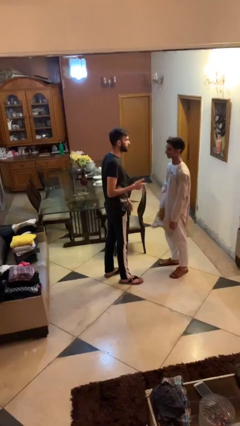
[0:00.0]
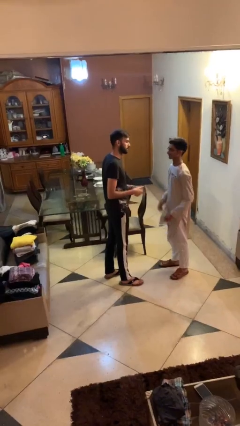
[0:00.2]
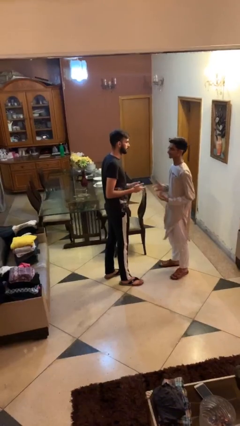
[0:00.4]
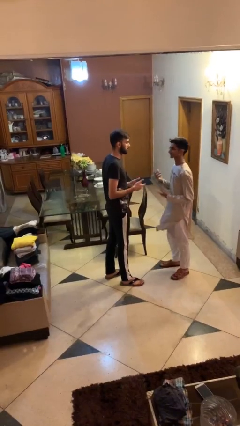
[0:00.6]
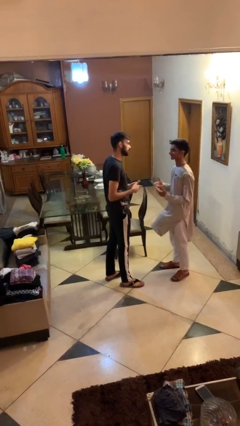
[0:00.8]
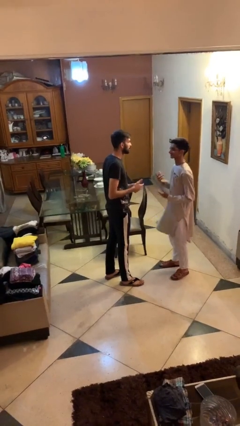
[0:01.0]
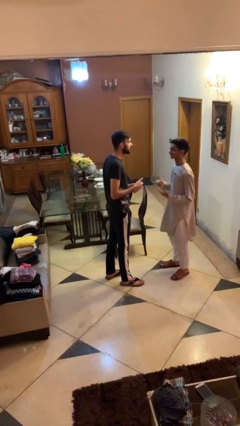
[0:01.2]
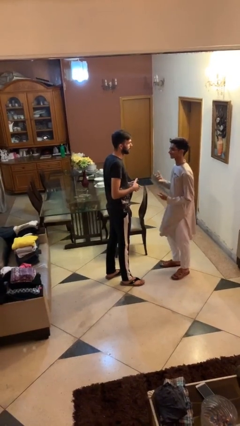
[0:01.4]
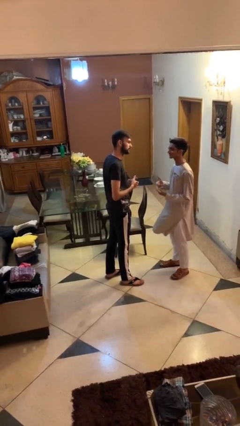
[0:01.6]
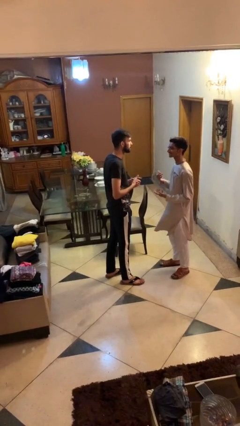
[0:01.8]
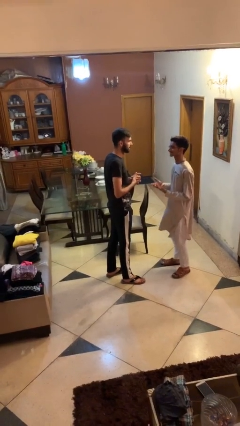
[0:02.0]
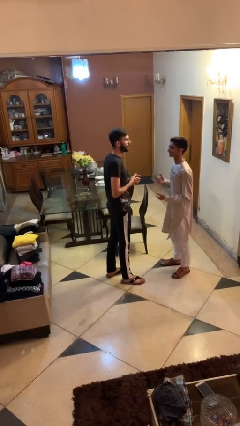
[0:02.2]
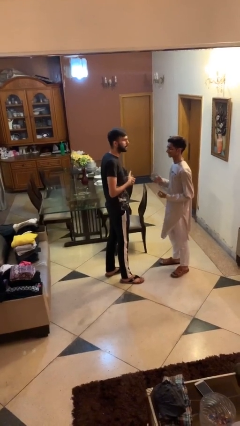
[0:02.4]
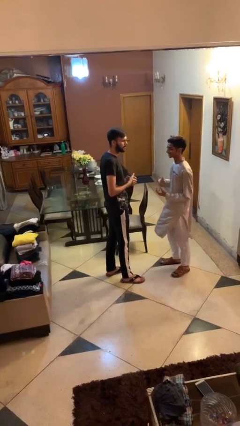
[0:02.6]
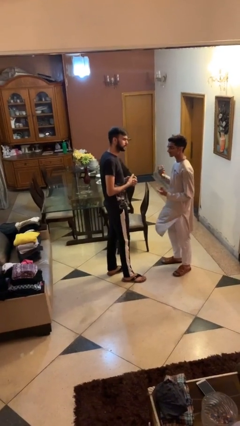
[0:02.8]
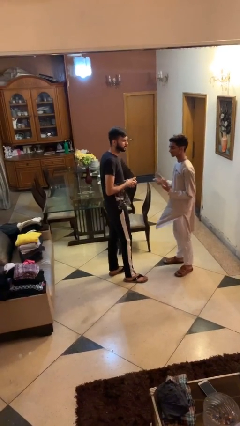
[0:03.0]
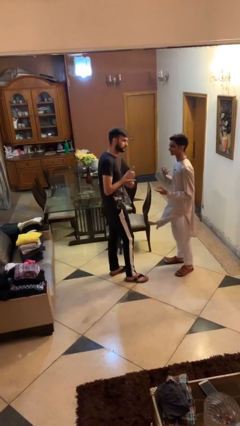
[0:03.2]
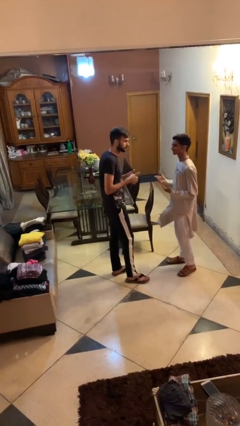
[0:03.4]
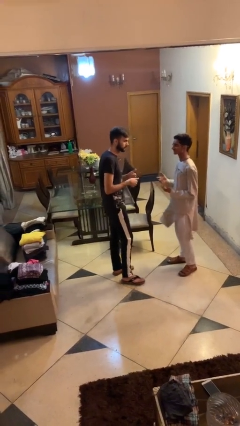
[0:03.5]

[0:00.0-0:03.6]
person talks to person

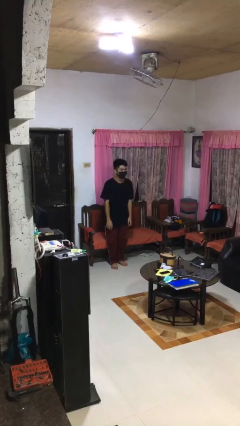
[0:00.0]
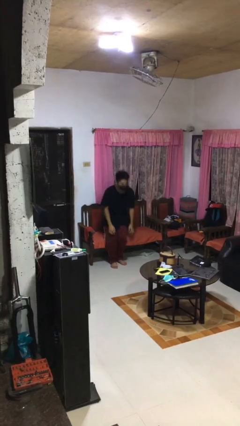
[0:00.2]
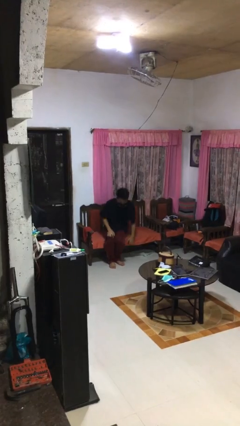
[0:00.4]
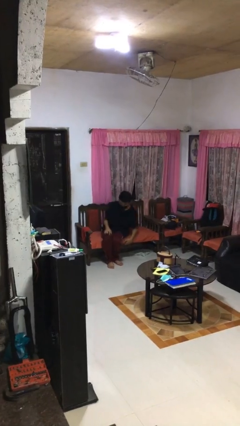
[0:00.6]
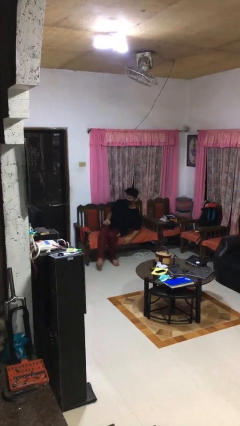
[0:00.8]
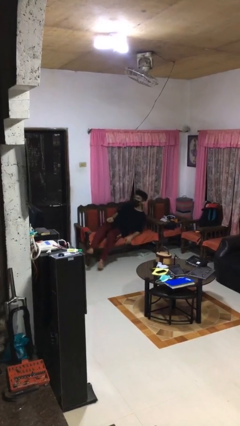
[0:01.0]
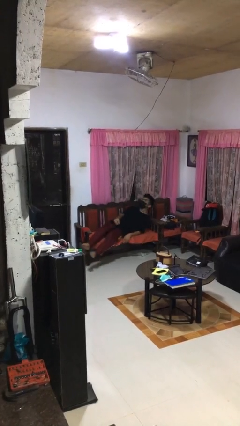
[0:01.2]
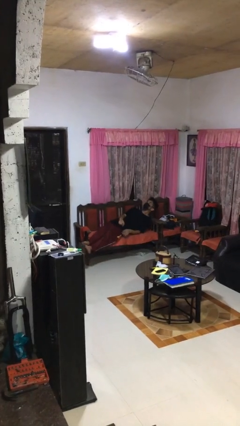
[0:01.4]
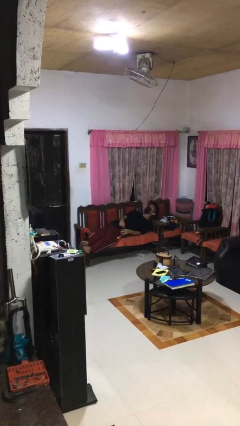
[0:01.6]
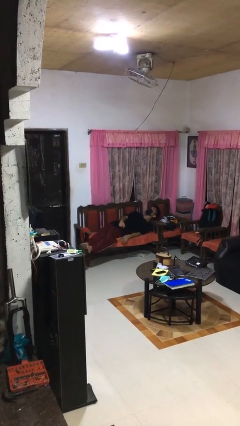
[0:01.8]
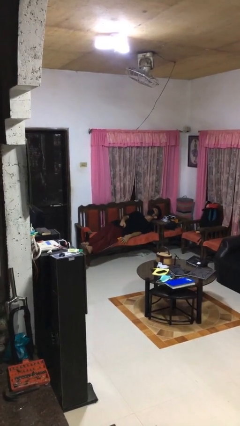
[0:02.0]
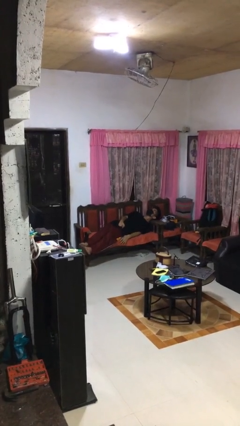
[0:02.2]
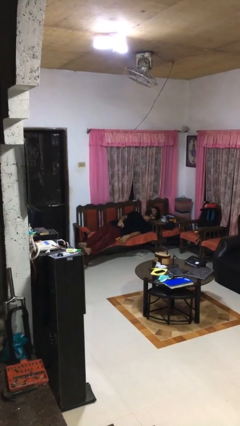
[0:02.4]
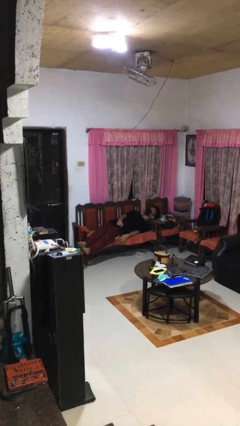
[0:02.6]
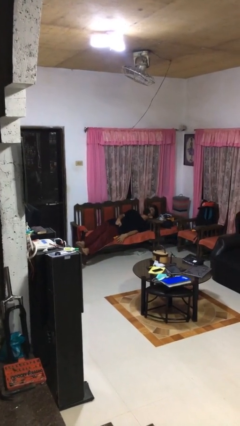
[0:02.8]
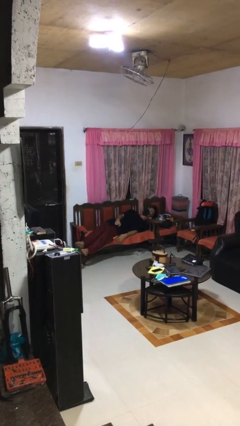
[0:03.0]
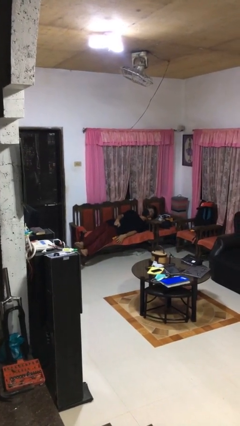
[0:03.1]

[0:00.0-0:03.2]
person lies down on couch

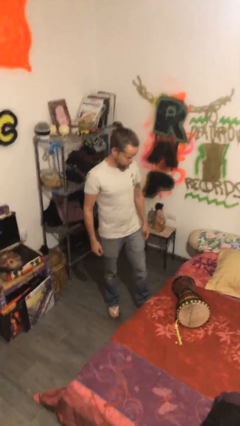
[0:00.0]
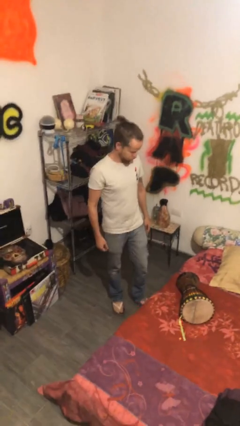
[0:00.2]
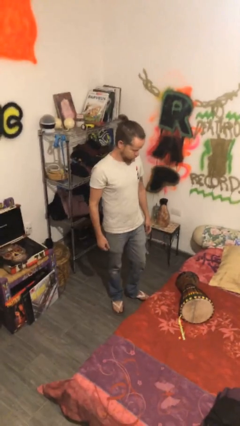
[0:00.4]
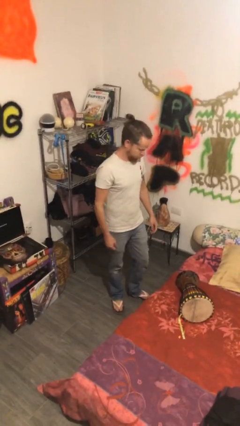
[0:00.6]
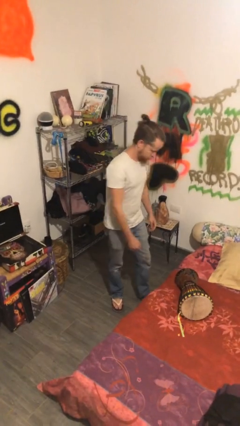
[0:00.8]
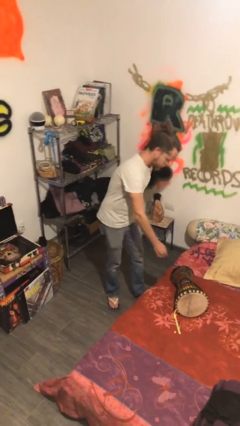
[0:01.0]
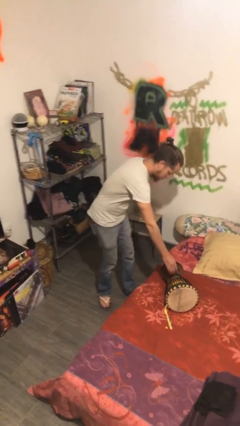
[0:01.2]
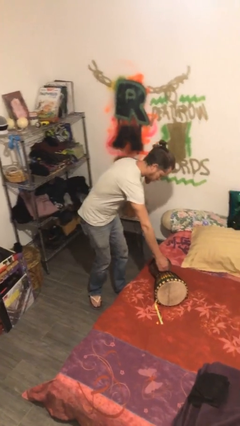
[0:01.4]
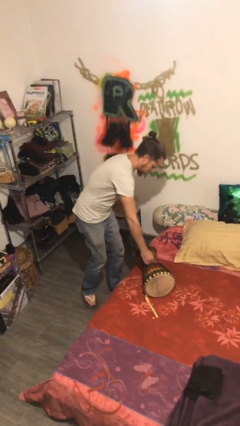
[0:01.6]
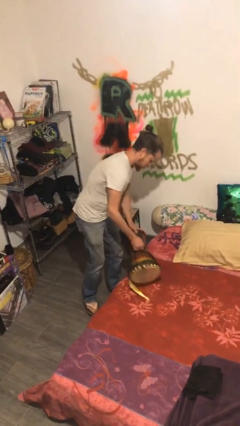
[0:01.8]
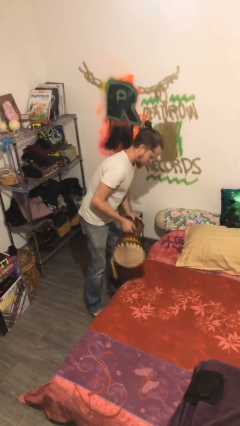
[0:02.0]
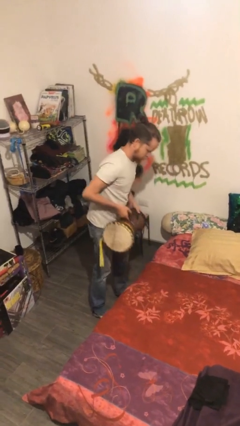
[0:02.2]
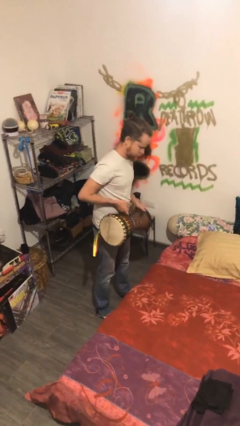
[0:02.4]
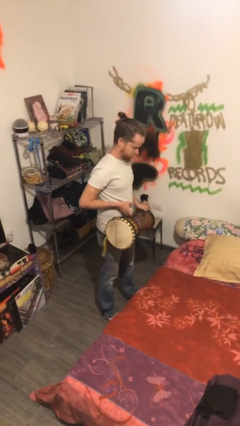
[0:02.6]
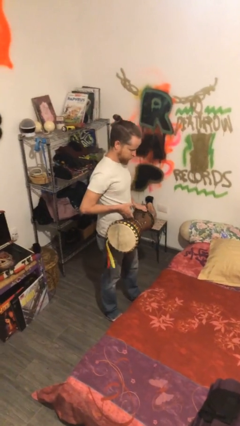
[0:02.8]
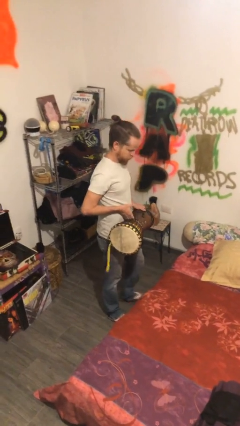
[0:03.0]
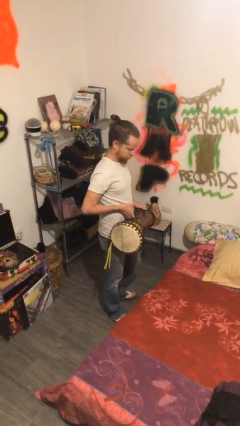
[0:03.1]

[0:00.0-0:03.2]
person picks up object from bed

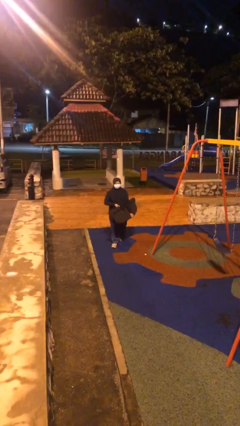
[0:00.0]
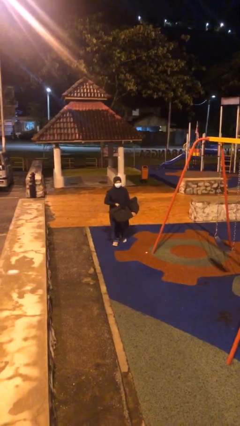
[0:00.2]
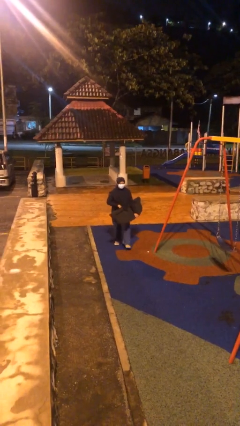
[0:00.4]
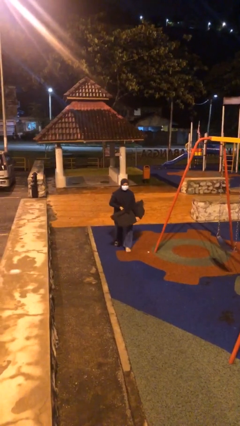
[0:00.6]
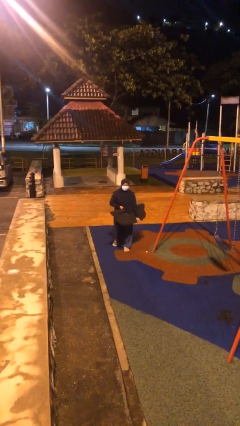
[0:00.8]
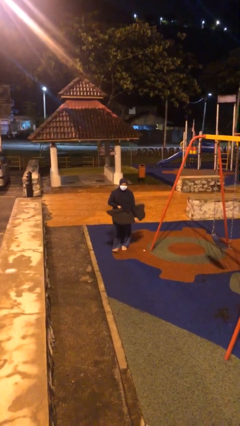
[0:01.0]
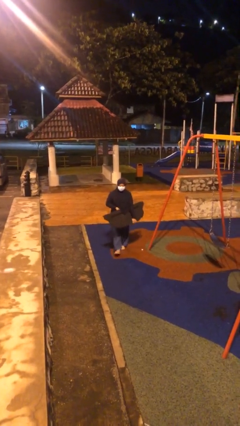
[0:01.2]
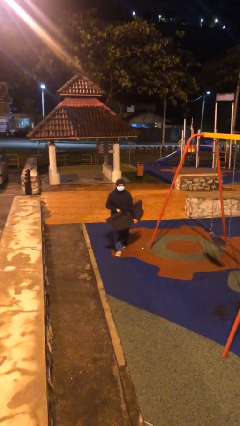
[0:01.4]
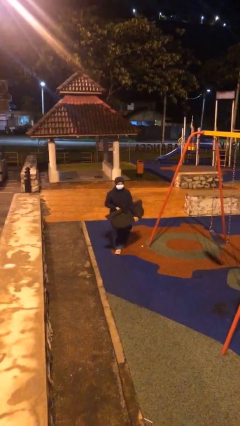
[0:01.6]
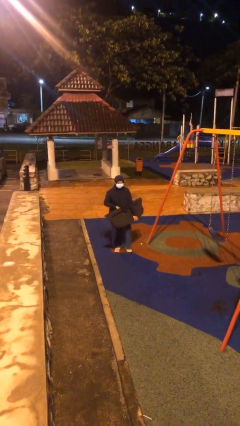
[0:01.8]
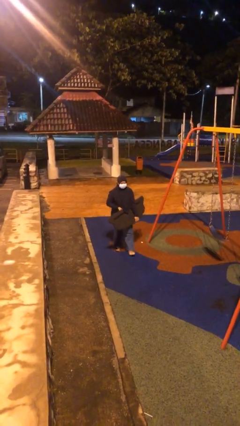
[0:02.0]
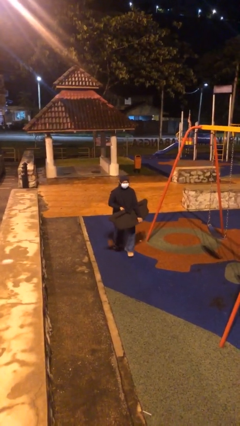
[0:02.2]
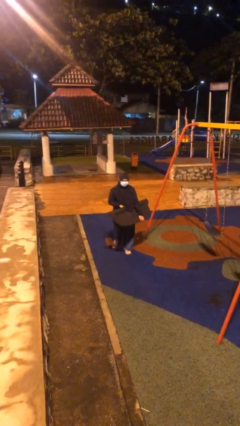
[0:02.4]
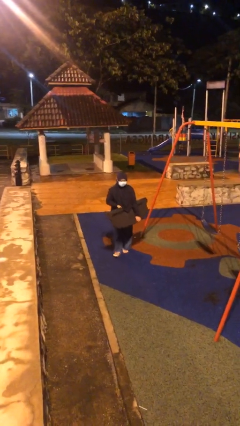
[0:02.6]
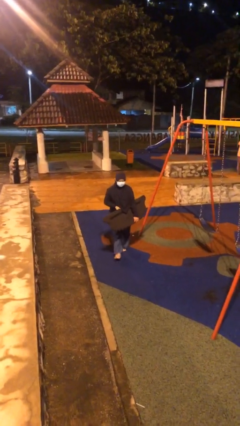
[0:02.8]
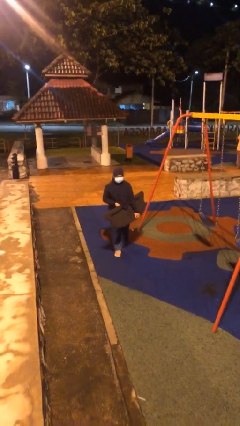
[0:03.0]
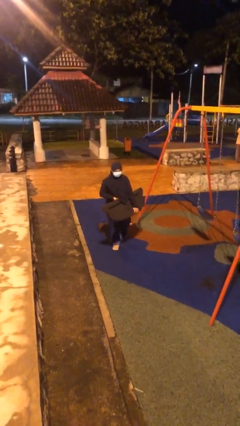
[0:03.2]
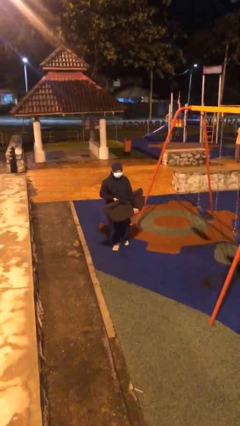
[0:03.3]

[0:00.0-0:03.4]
person carries heavy object

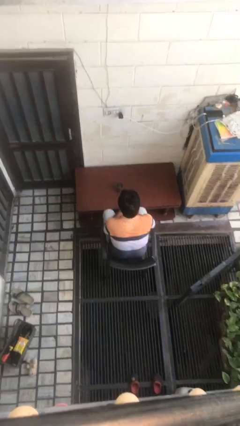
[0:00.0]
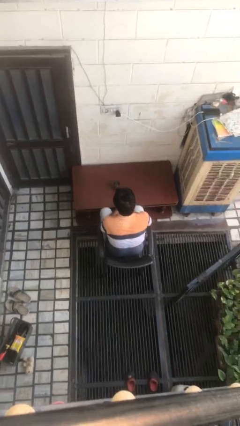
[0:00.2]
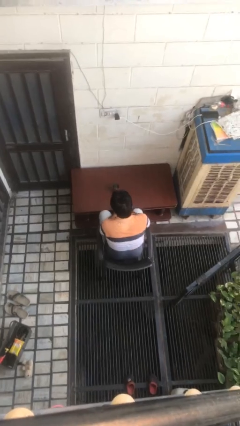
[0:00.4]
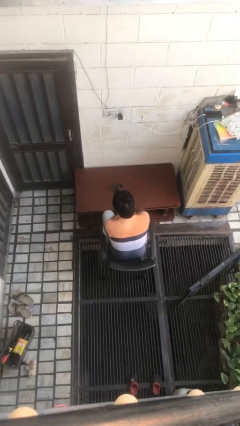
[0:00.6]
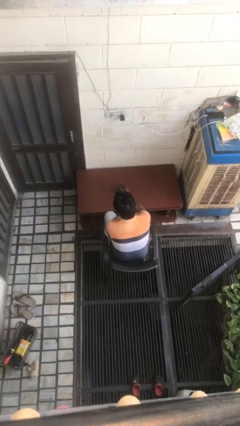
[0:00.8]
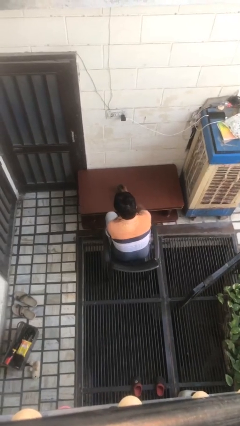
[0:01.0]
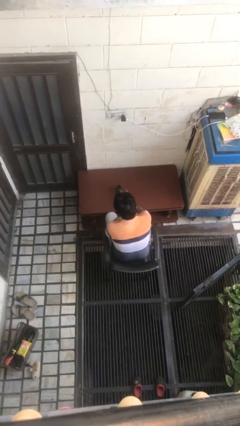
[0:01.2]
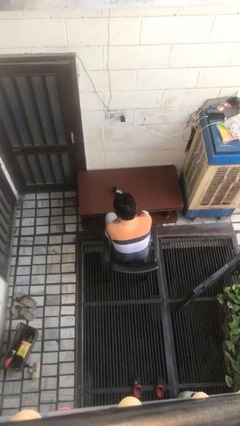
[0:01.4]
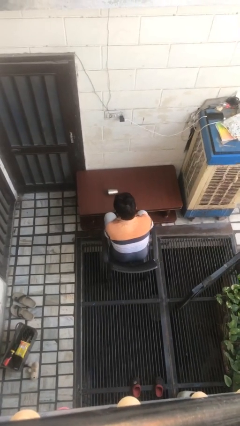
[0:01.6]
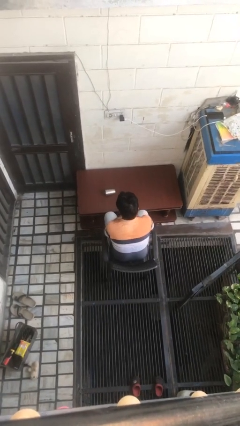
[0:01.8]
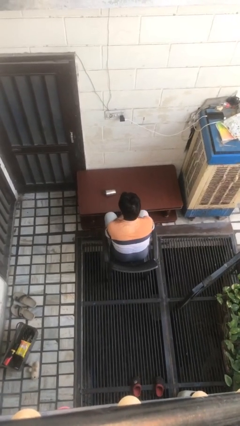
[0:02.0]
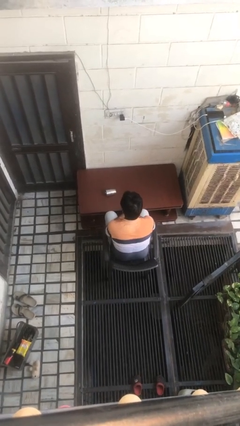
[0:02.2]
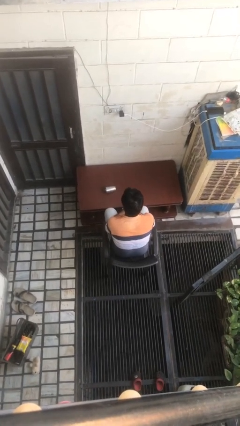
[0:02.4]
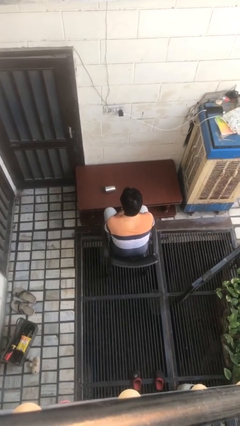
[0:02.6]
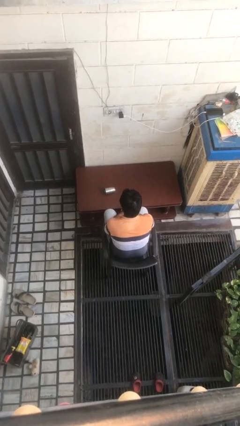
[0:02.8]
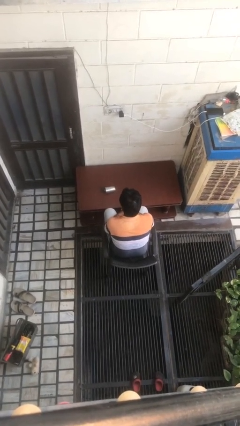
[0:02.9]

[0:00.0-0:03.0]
person knocks over glass

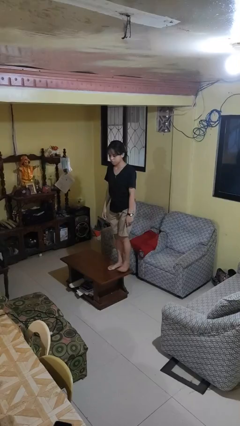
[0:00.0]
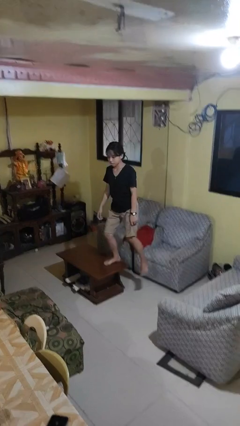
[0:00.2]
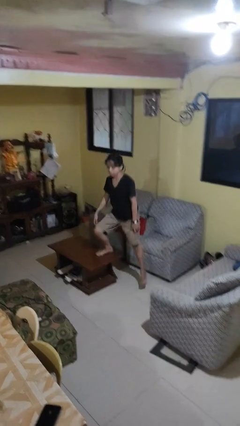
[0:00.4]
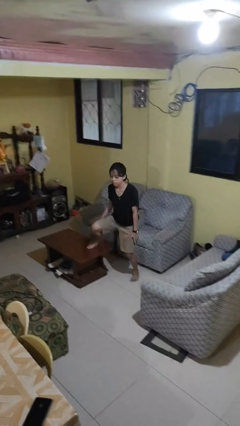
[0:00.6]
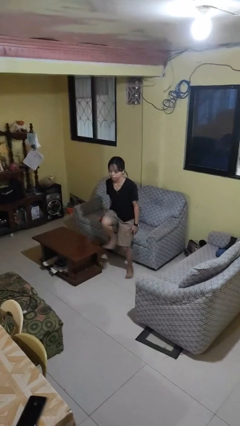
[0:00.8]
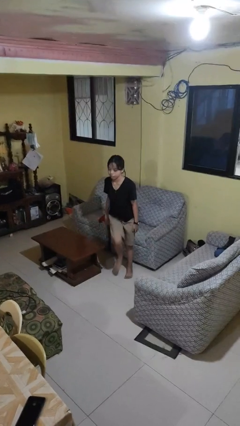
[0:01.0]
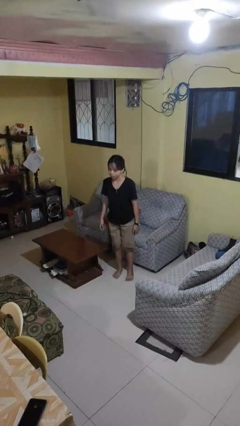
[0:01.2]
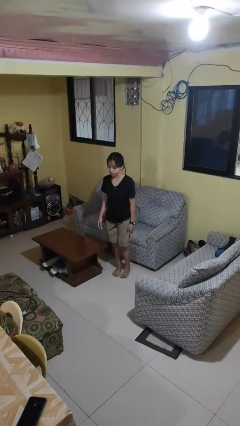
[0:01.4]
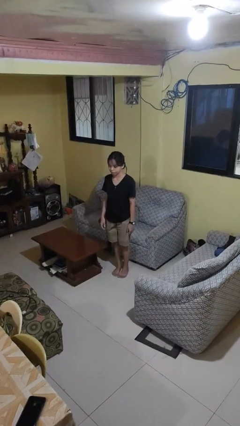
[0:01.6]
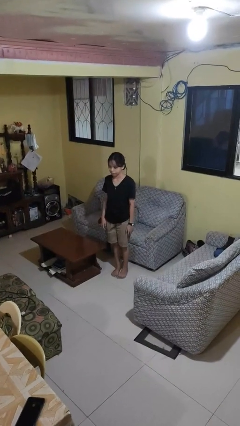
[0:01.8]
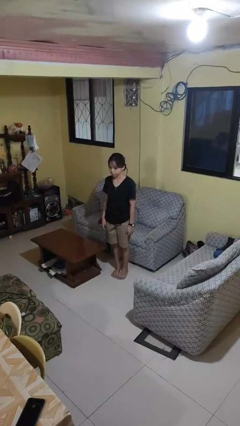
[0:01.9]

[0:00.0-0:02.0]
person climbs off table
